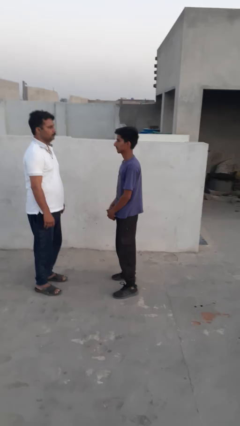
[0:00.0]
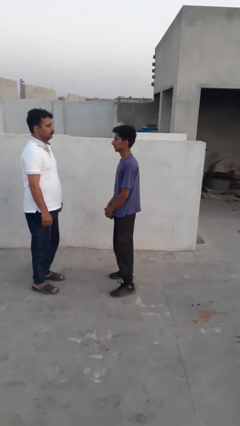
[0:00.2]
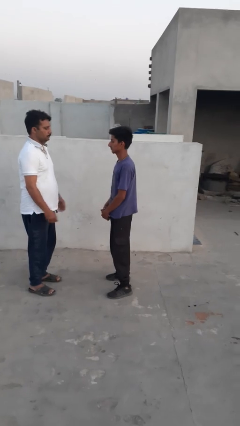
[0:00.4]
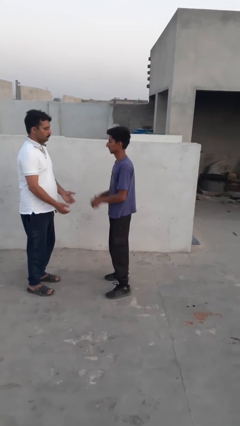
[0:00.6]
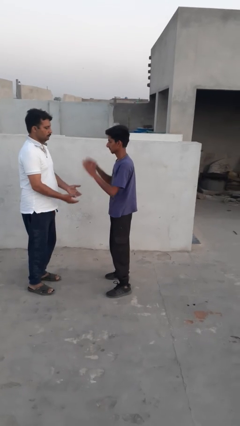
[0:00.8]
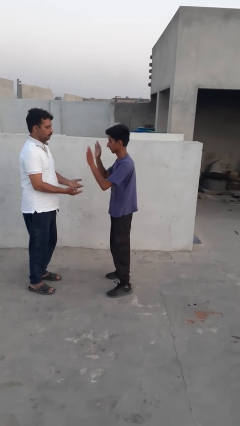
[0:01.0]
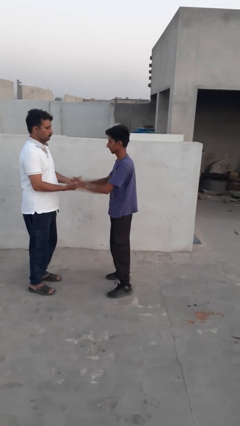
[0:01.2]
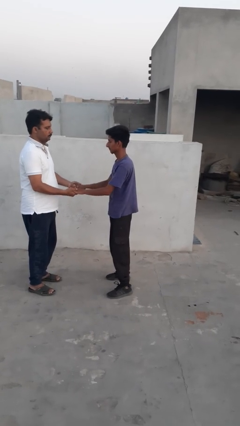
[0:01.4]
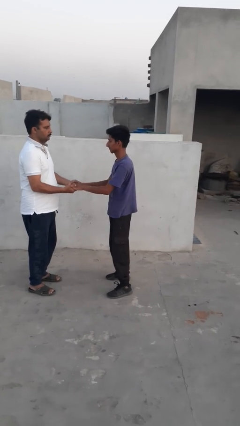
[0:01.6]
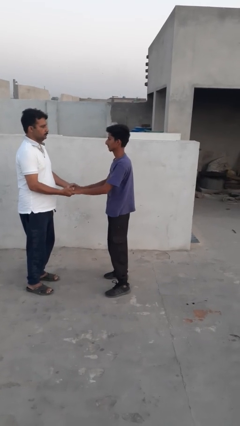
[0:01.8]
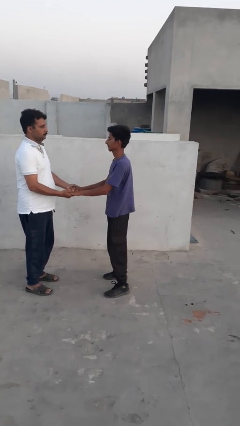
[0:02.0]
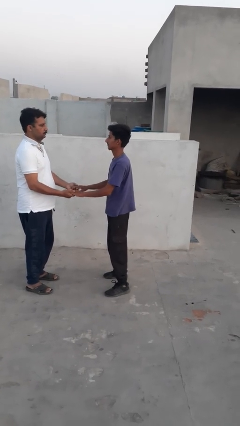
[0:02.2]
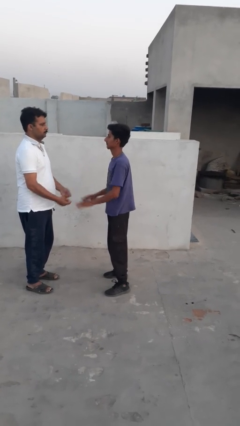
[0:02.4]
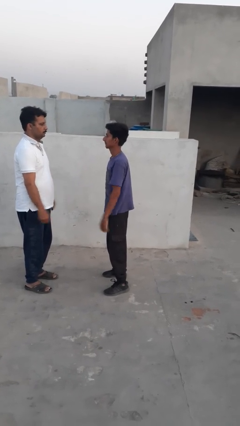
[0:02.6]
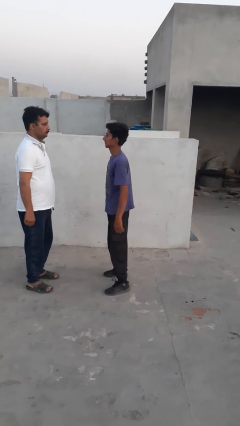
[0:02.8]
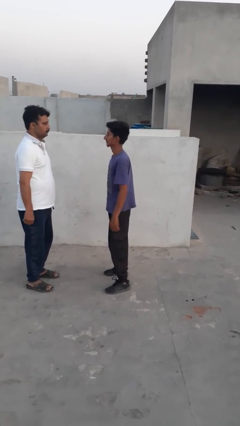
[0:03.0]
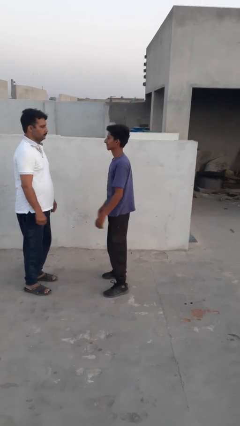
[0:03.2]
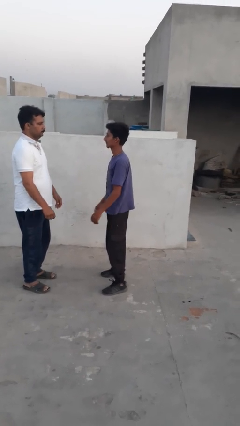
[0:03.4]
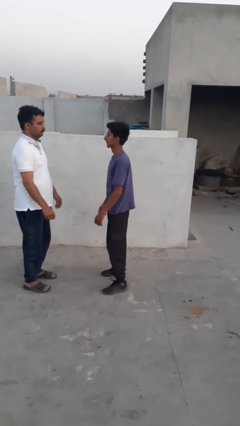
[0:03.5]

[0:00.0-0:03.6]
person highfives hand

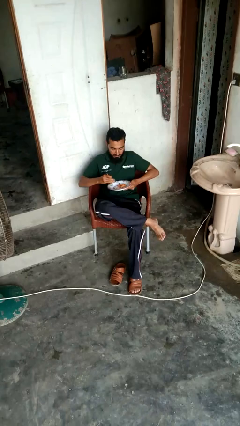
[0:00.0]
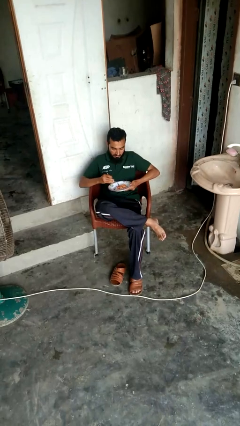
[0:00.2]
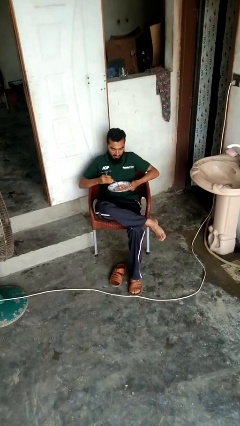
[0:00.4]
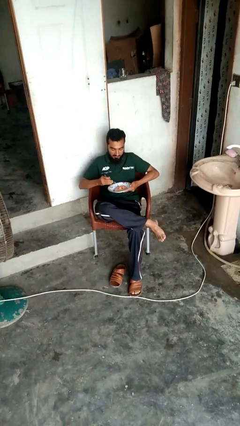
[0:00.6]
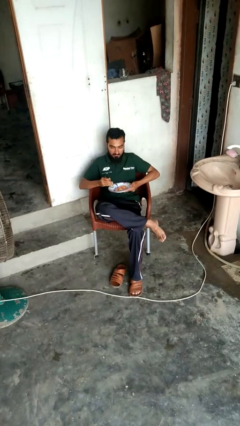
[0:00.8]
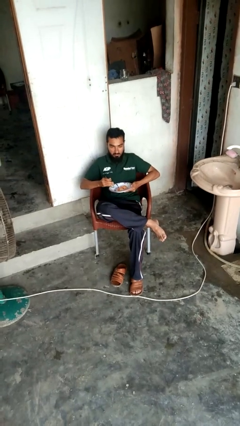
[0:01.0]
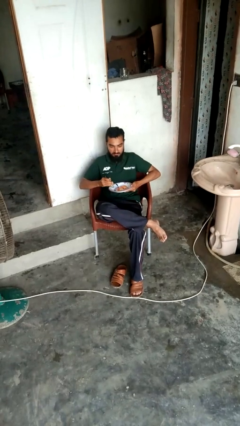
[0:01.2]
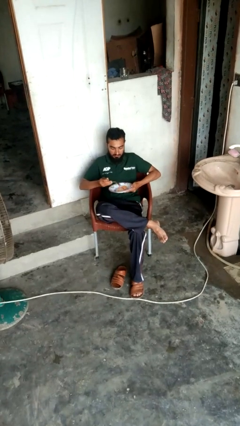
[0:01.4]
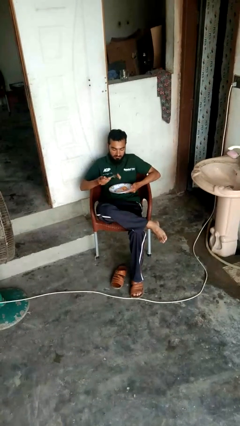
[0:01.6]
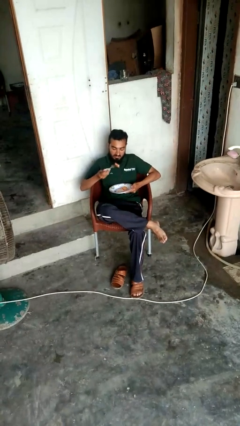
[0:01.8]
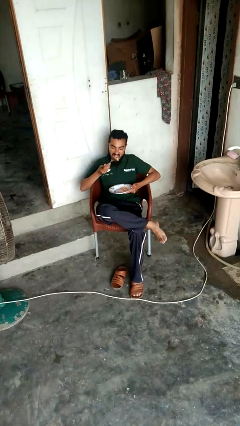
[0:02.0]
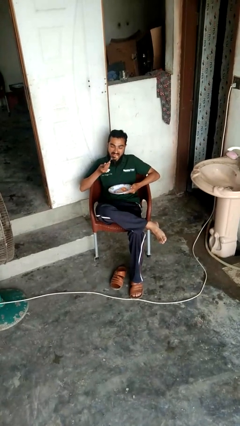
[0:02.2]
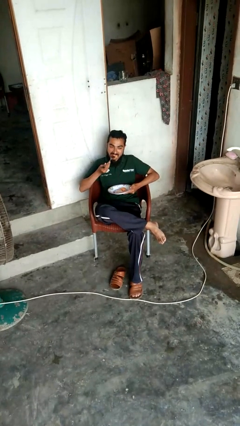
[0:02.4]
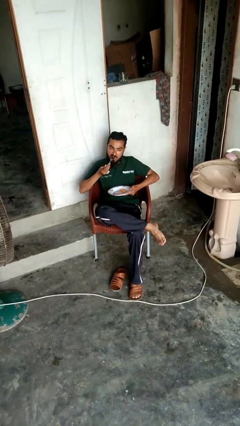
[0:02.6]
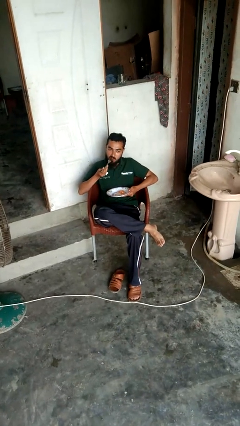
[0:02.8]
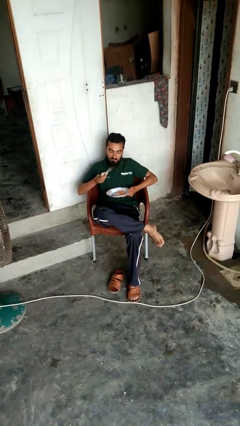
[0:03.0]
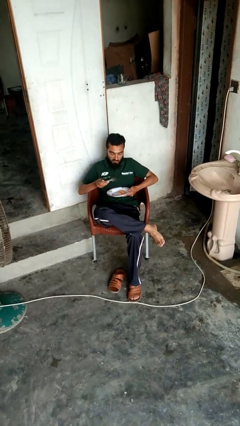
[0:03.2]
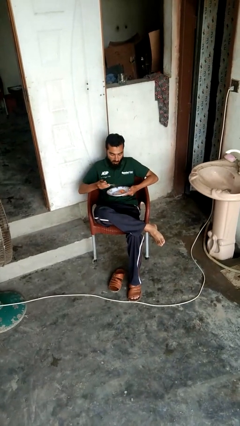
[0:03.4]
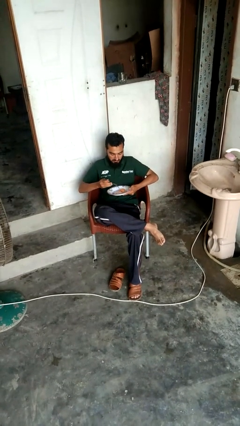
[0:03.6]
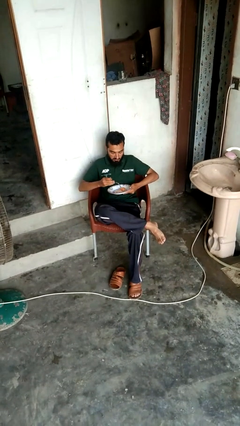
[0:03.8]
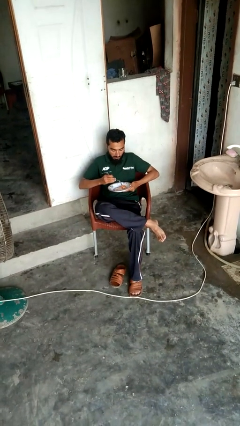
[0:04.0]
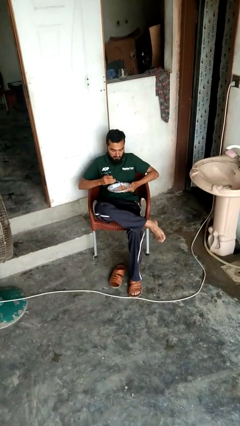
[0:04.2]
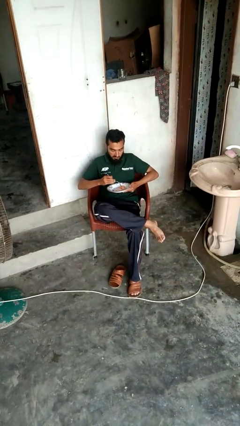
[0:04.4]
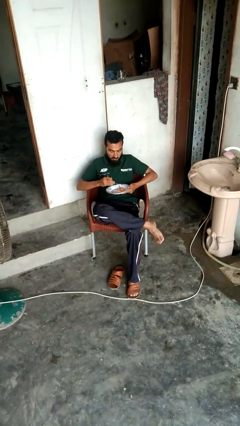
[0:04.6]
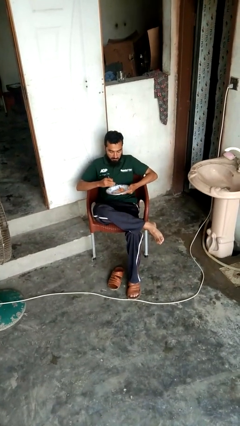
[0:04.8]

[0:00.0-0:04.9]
person eats with utensil

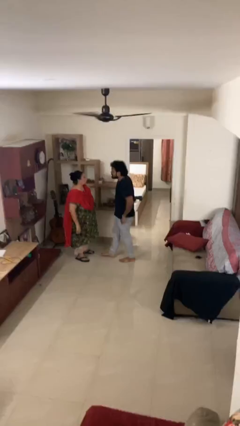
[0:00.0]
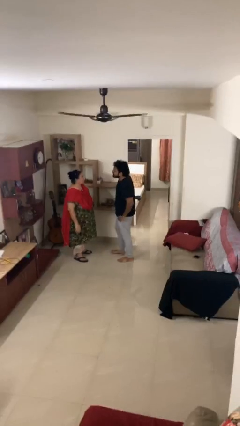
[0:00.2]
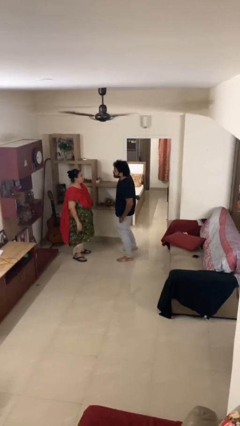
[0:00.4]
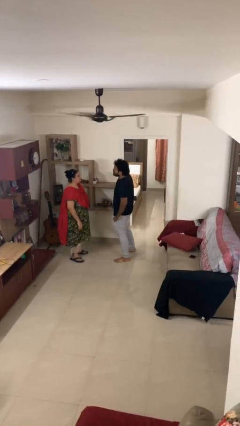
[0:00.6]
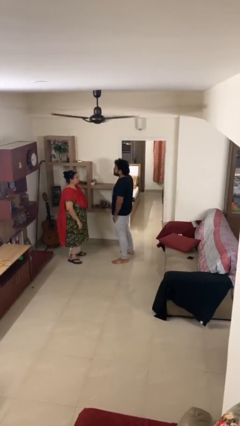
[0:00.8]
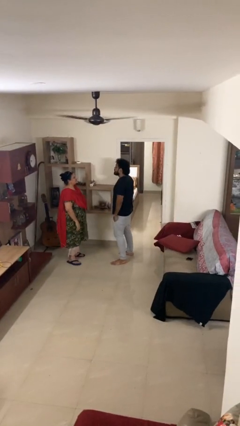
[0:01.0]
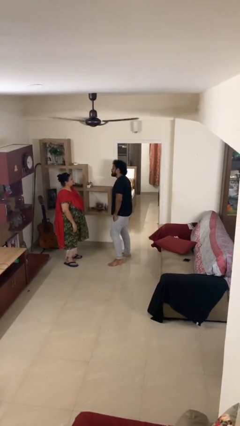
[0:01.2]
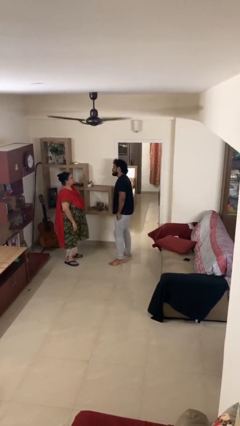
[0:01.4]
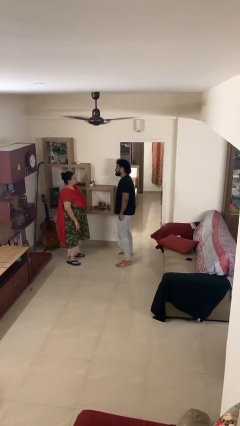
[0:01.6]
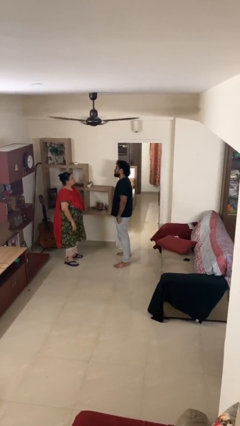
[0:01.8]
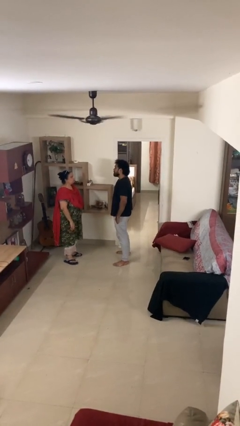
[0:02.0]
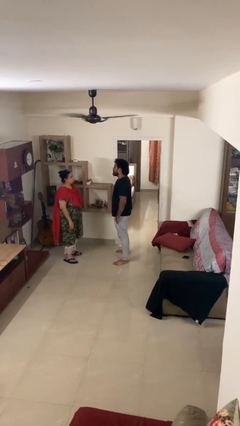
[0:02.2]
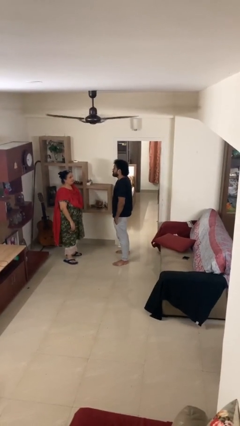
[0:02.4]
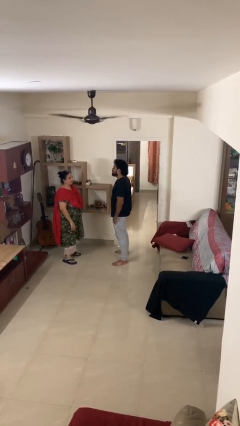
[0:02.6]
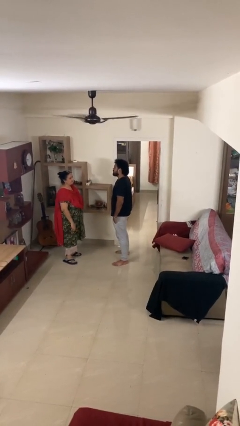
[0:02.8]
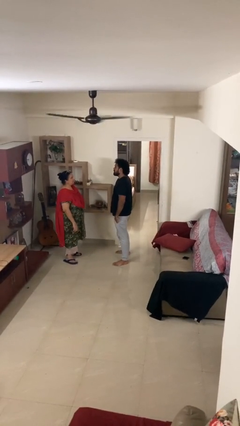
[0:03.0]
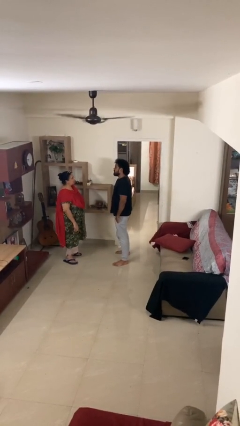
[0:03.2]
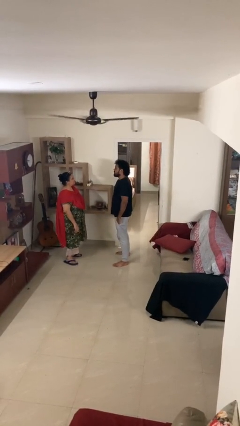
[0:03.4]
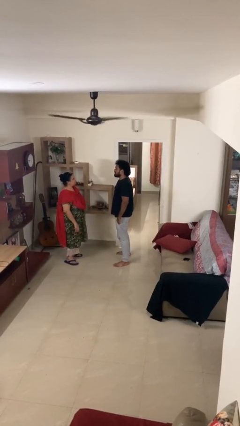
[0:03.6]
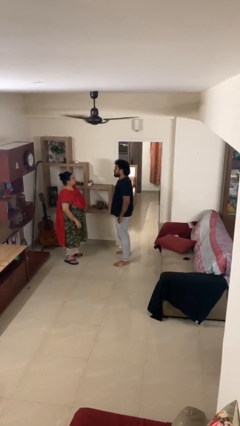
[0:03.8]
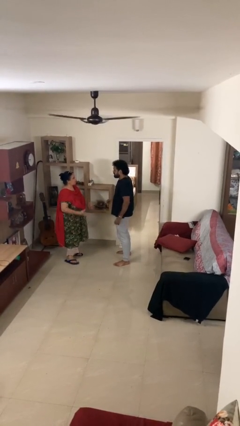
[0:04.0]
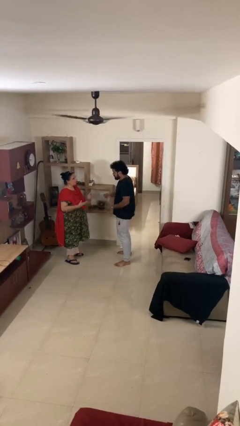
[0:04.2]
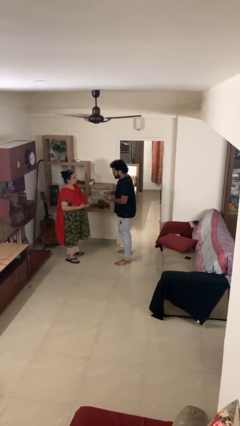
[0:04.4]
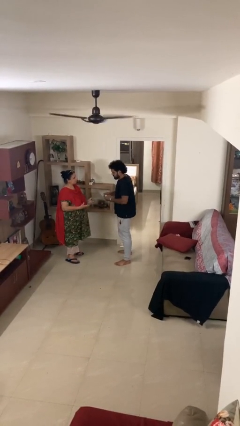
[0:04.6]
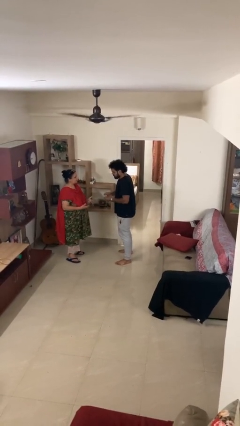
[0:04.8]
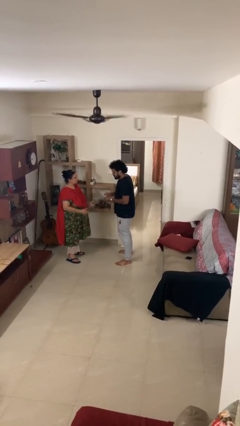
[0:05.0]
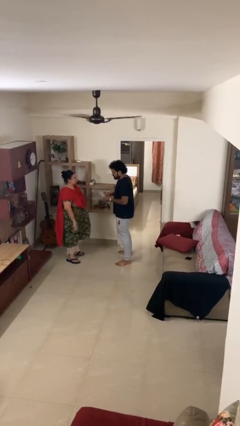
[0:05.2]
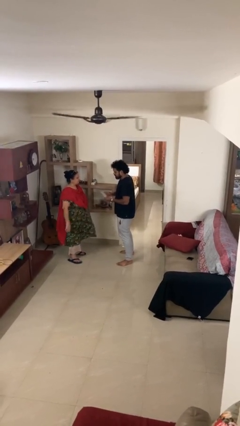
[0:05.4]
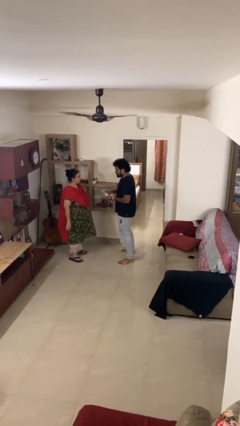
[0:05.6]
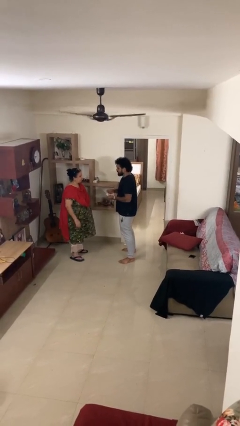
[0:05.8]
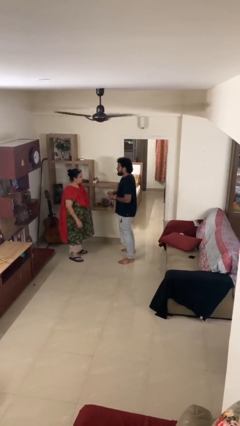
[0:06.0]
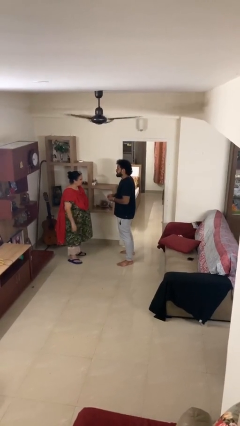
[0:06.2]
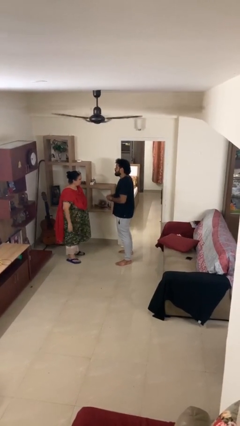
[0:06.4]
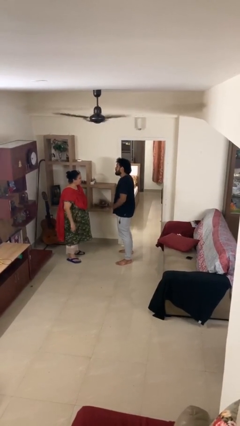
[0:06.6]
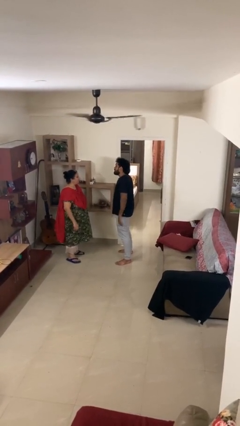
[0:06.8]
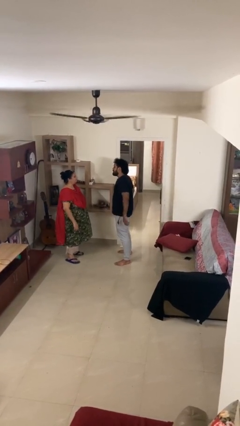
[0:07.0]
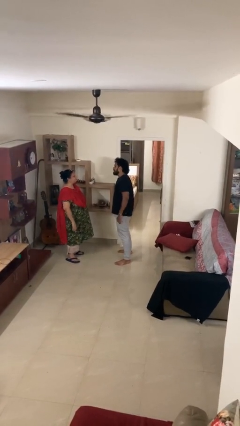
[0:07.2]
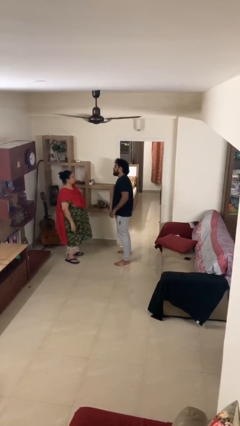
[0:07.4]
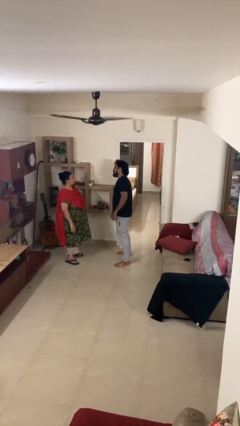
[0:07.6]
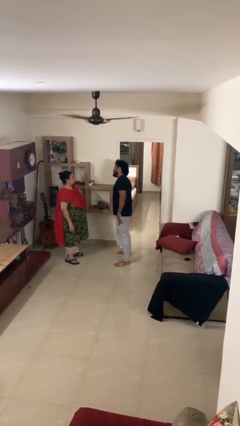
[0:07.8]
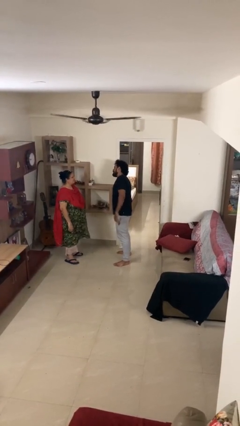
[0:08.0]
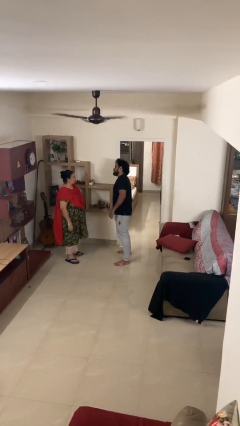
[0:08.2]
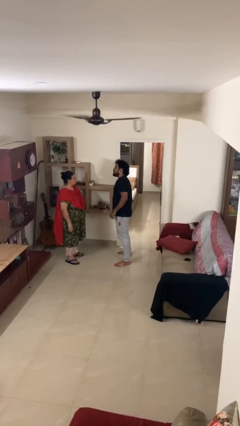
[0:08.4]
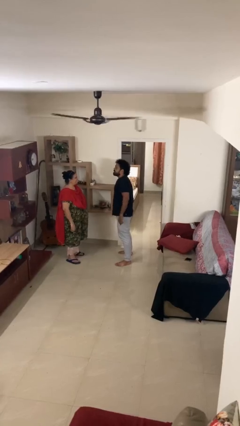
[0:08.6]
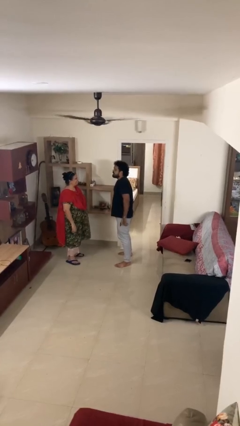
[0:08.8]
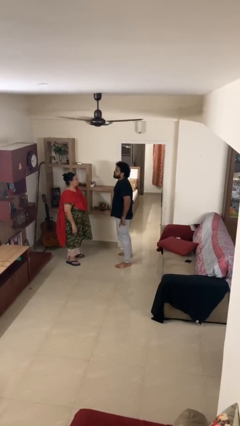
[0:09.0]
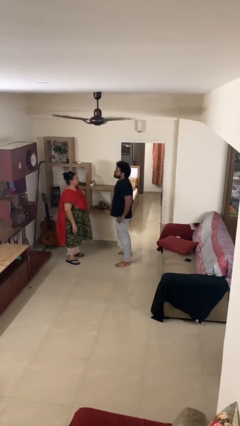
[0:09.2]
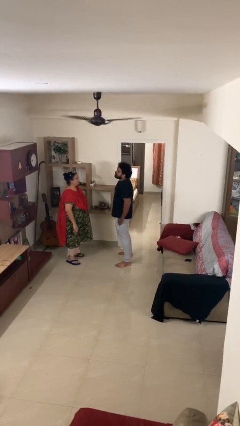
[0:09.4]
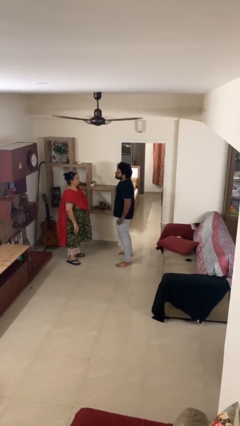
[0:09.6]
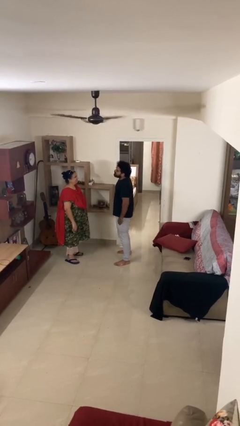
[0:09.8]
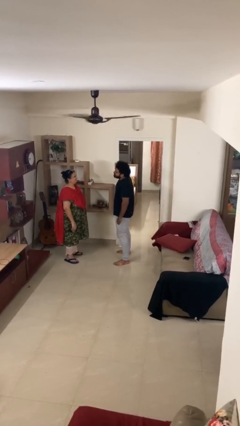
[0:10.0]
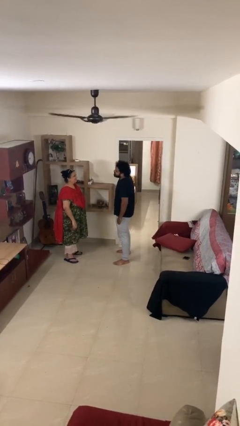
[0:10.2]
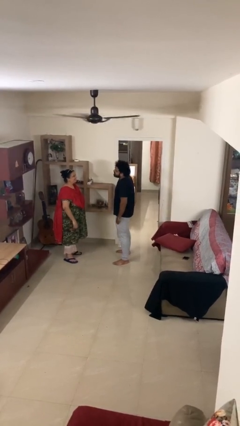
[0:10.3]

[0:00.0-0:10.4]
person talks to person
